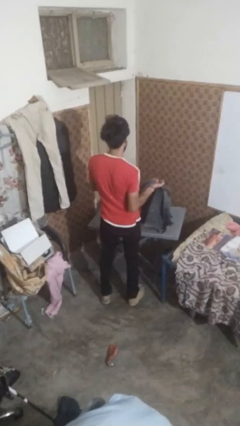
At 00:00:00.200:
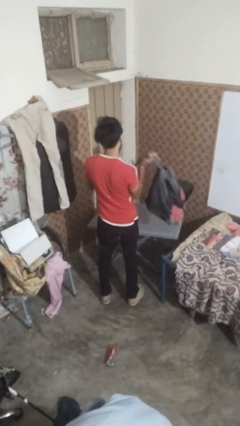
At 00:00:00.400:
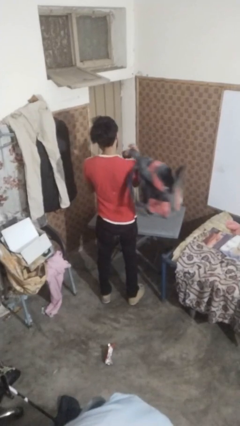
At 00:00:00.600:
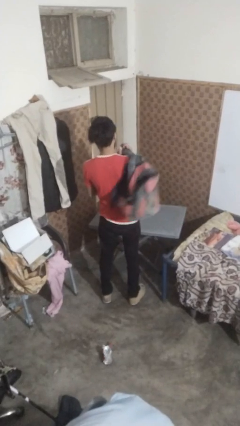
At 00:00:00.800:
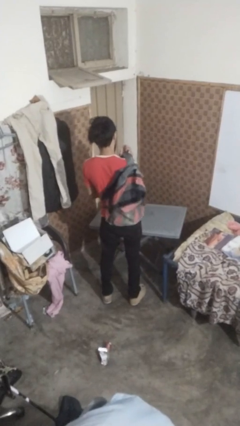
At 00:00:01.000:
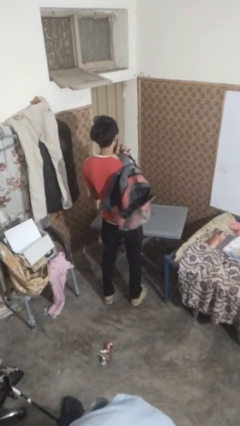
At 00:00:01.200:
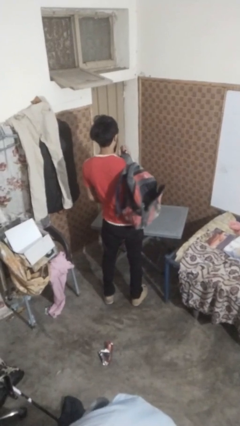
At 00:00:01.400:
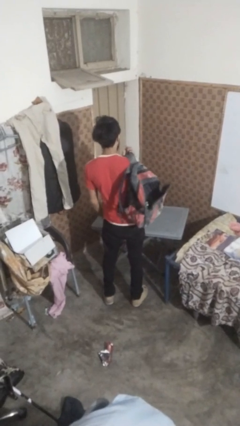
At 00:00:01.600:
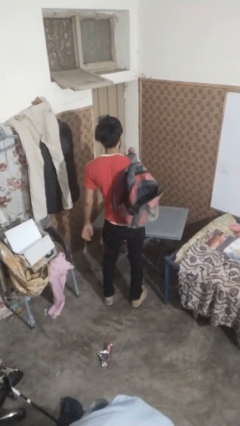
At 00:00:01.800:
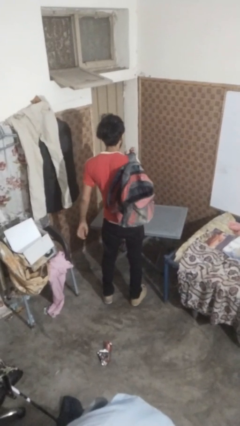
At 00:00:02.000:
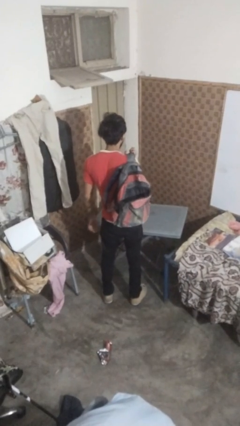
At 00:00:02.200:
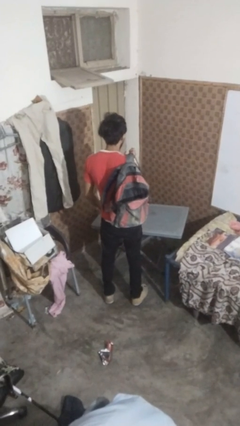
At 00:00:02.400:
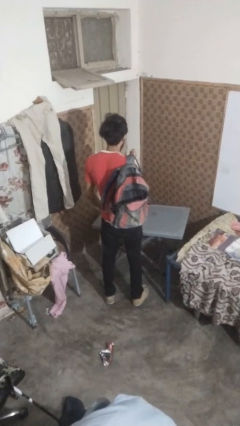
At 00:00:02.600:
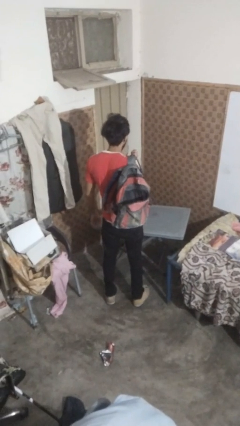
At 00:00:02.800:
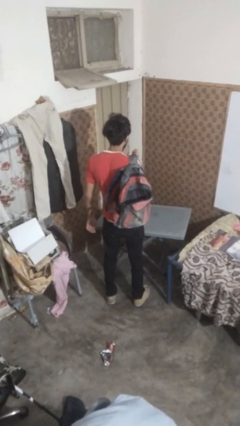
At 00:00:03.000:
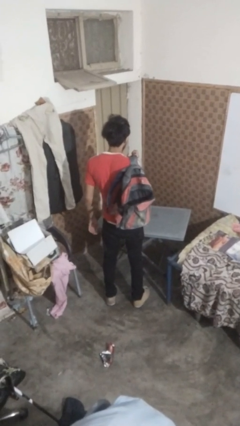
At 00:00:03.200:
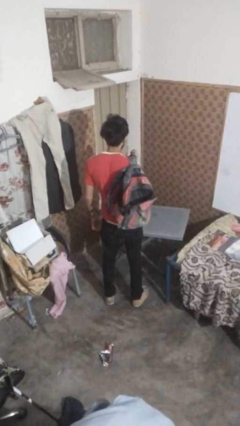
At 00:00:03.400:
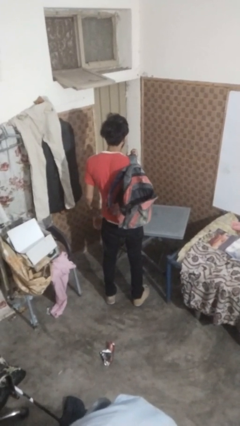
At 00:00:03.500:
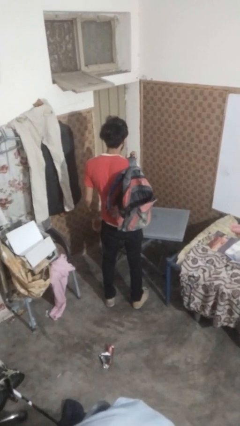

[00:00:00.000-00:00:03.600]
person puts on backpack

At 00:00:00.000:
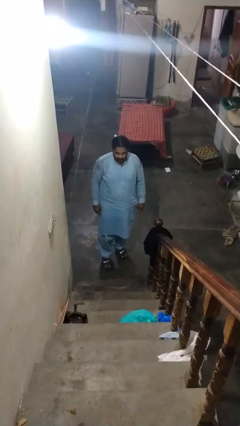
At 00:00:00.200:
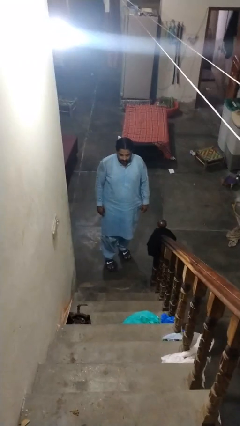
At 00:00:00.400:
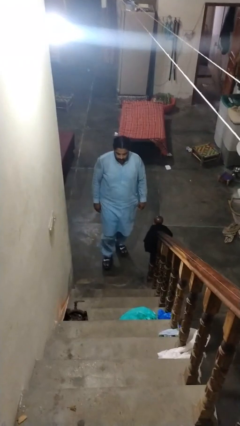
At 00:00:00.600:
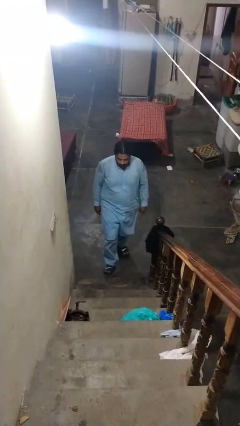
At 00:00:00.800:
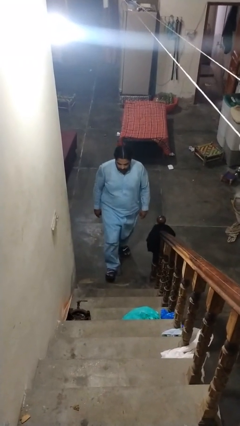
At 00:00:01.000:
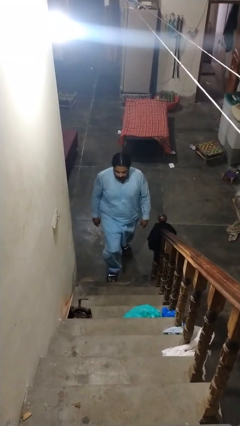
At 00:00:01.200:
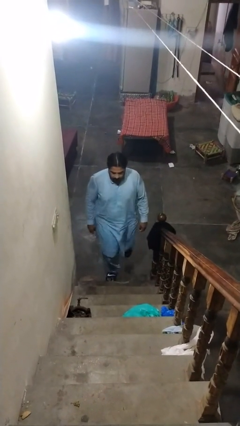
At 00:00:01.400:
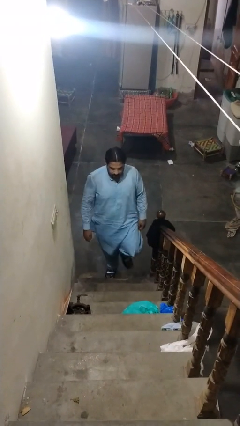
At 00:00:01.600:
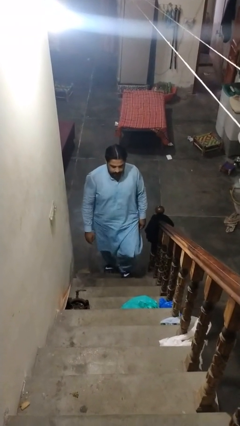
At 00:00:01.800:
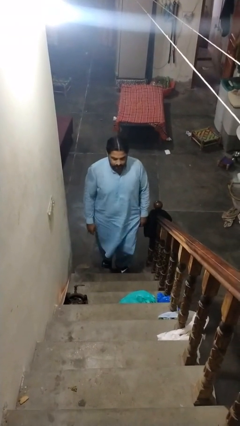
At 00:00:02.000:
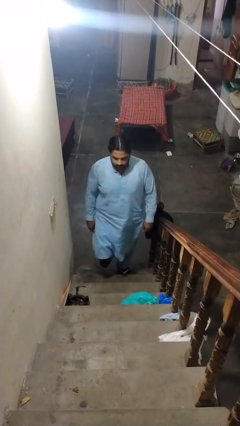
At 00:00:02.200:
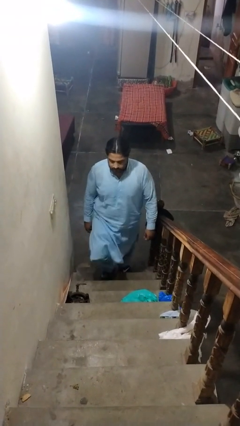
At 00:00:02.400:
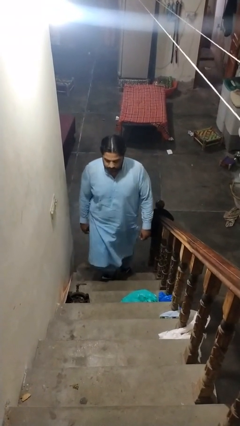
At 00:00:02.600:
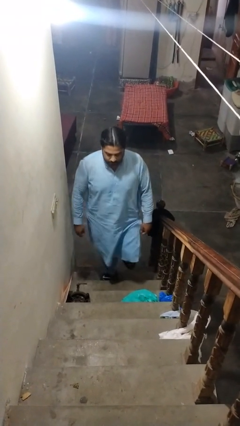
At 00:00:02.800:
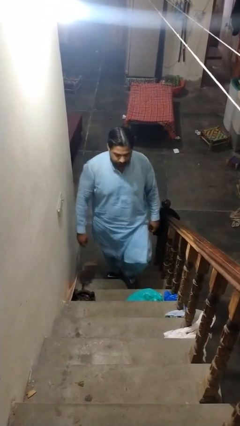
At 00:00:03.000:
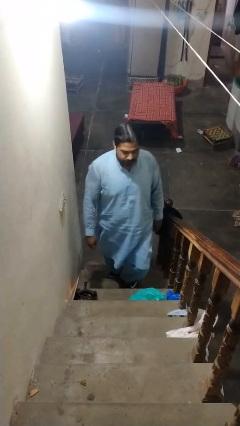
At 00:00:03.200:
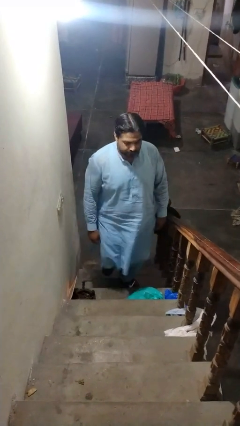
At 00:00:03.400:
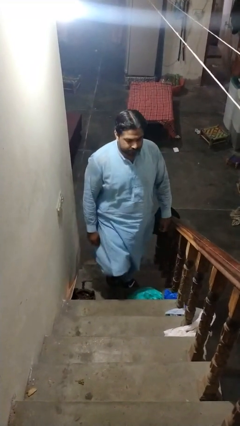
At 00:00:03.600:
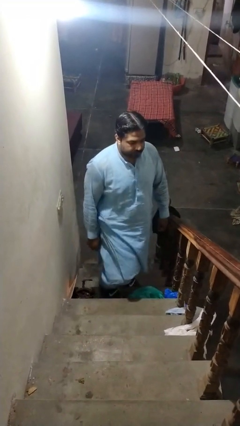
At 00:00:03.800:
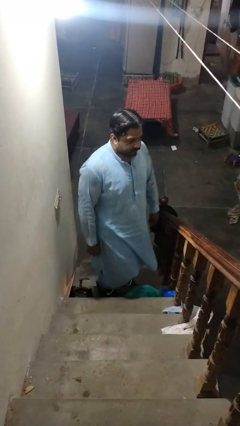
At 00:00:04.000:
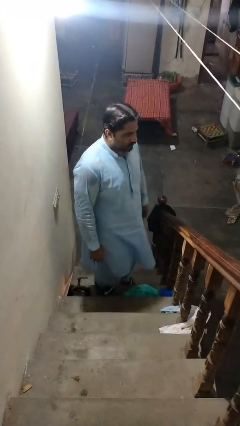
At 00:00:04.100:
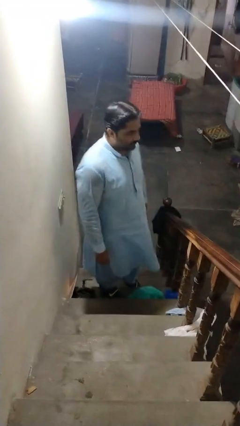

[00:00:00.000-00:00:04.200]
person climbs up stairs

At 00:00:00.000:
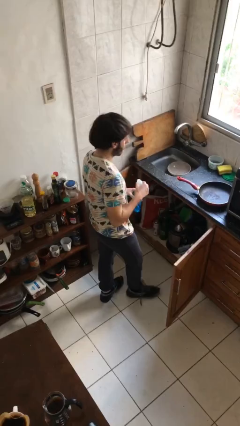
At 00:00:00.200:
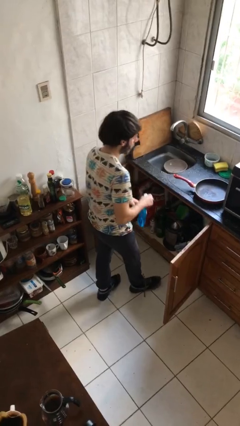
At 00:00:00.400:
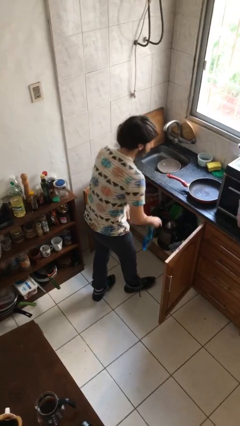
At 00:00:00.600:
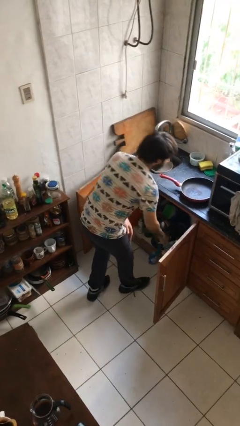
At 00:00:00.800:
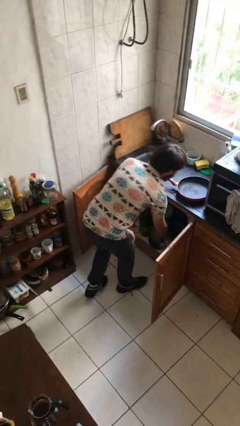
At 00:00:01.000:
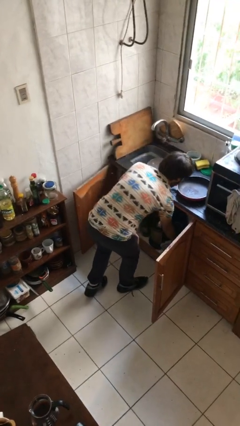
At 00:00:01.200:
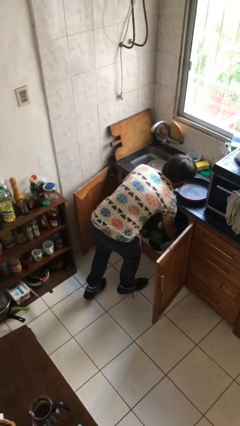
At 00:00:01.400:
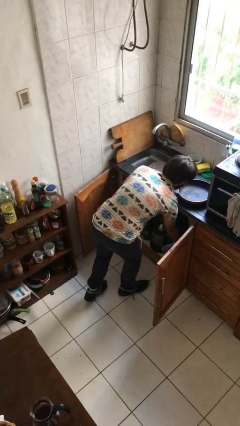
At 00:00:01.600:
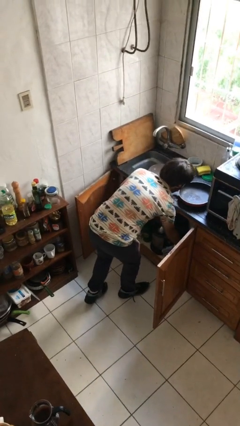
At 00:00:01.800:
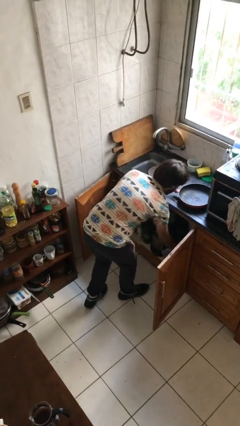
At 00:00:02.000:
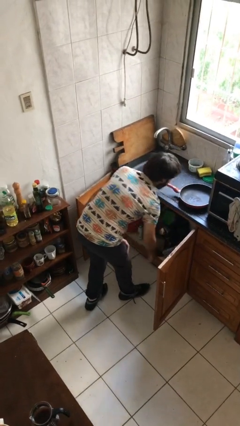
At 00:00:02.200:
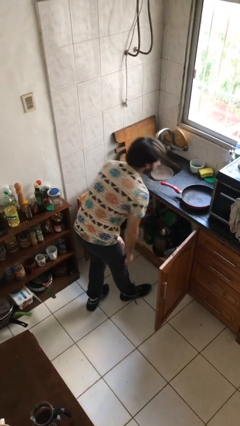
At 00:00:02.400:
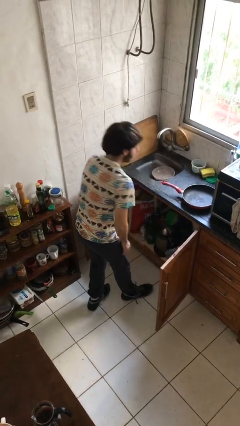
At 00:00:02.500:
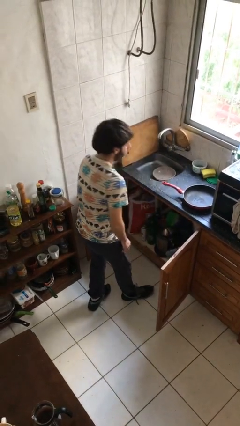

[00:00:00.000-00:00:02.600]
person puts down object into cabinet

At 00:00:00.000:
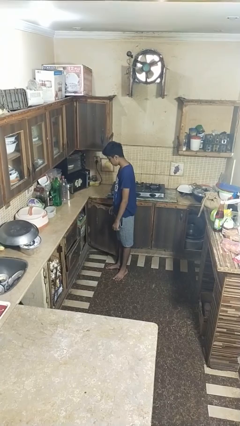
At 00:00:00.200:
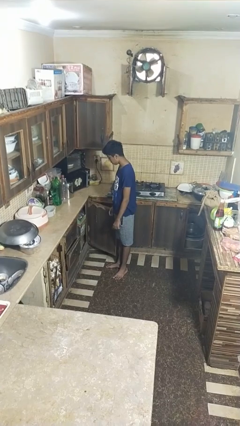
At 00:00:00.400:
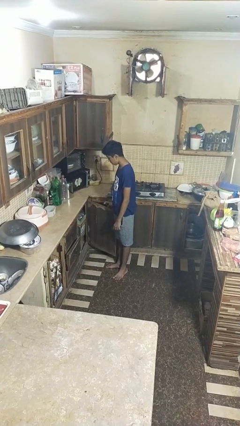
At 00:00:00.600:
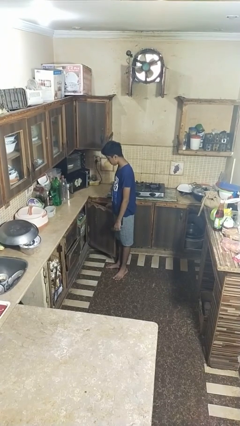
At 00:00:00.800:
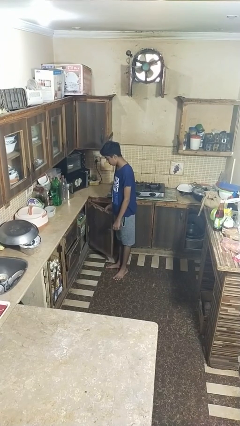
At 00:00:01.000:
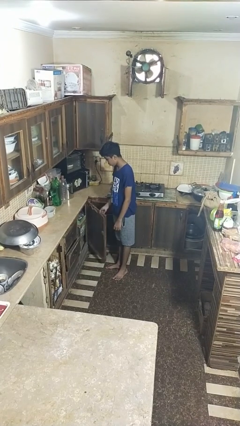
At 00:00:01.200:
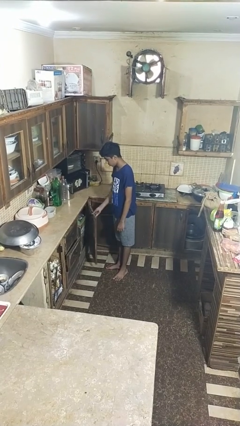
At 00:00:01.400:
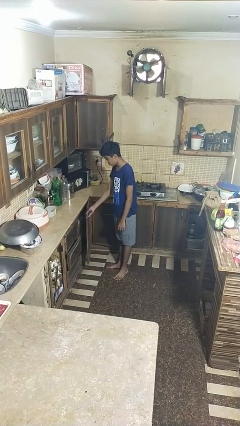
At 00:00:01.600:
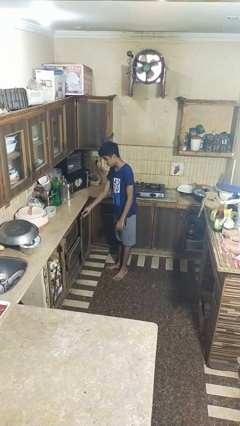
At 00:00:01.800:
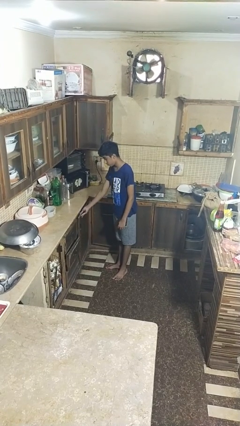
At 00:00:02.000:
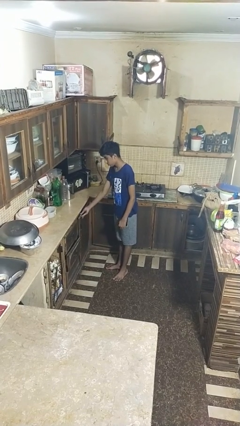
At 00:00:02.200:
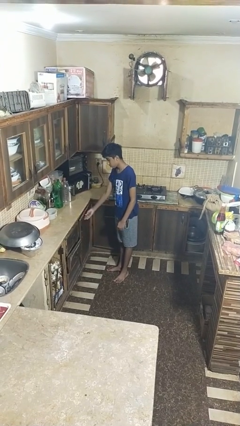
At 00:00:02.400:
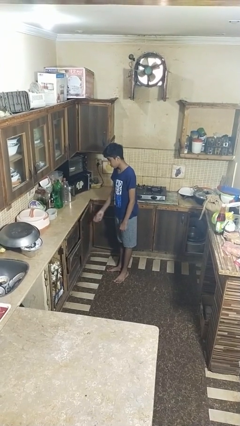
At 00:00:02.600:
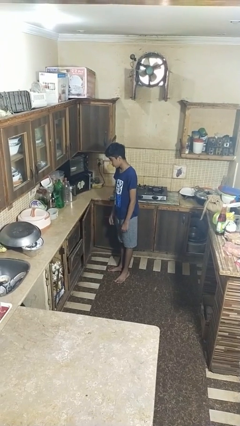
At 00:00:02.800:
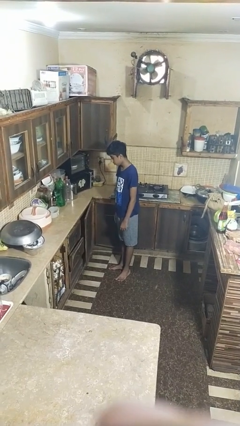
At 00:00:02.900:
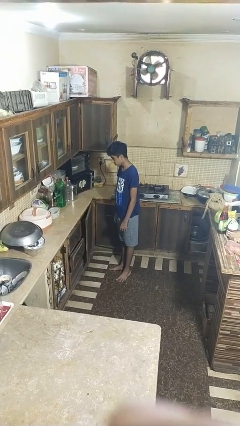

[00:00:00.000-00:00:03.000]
person closes closet door

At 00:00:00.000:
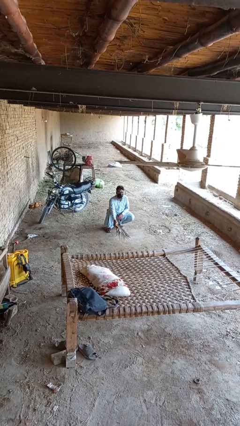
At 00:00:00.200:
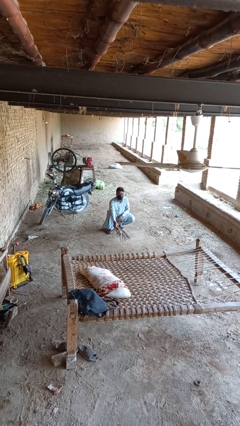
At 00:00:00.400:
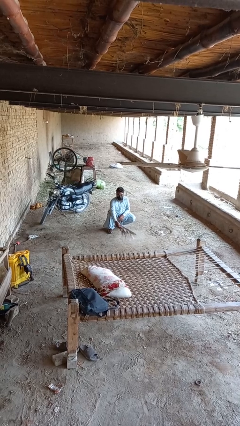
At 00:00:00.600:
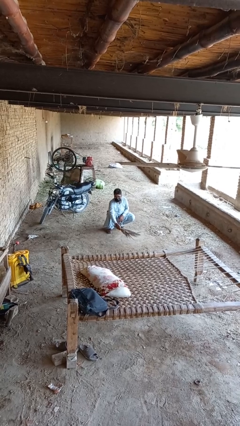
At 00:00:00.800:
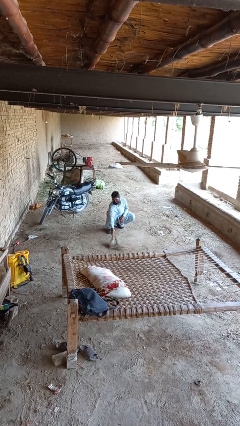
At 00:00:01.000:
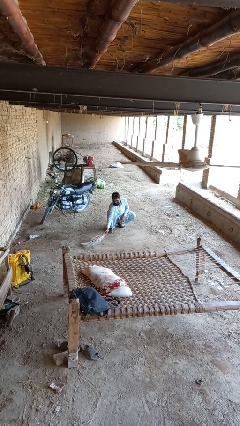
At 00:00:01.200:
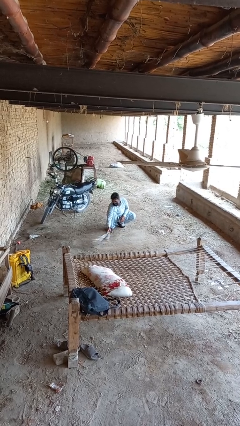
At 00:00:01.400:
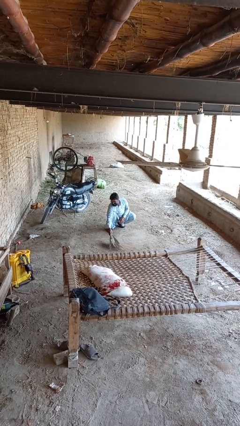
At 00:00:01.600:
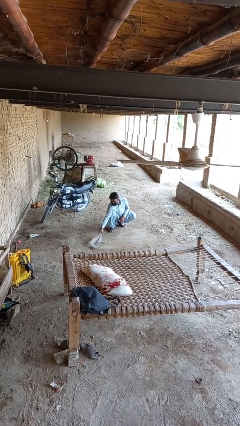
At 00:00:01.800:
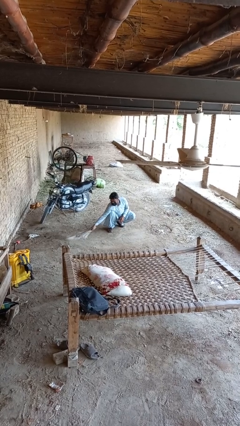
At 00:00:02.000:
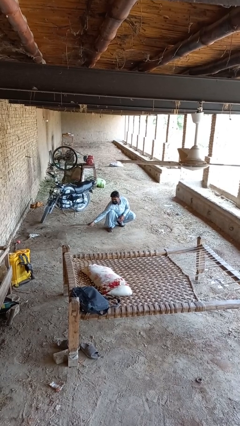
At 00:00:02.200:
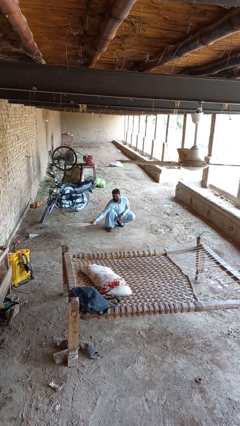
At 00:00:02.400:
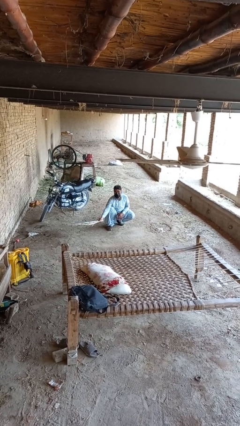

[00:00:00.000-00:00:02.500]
person sweeps floor

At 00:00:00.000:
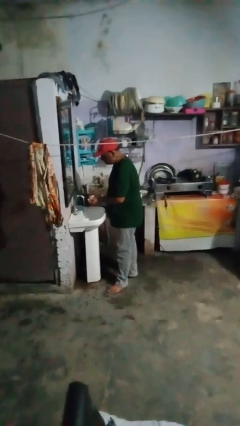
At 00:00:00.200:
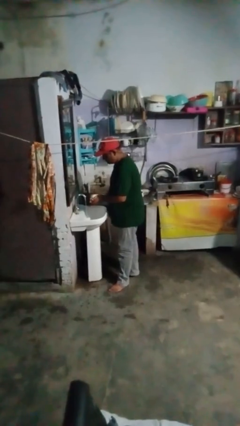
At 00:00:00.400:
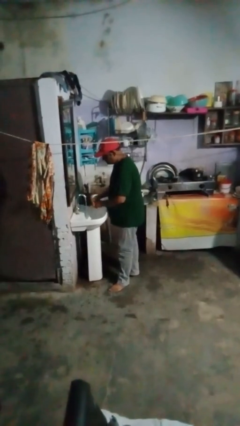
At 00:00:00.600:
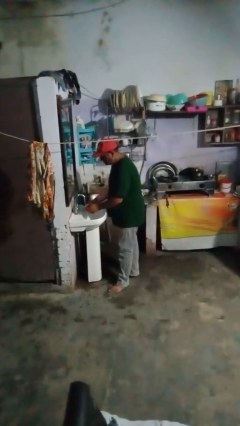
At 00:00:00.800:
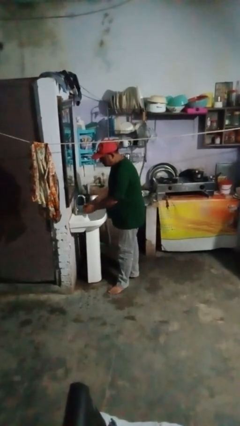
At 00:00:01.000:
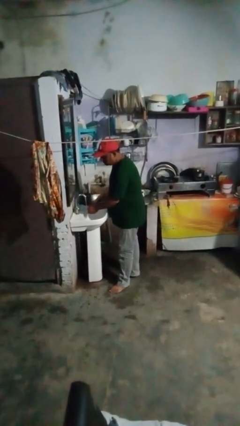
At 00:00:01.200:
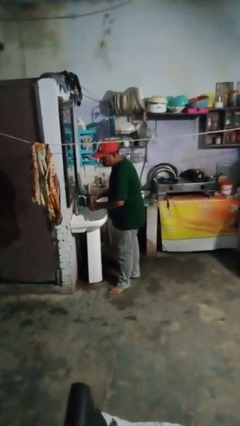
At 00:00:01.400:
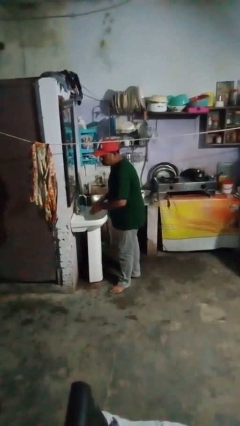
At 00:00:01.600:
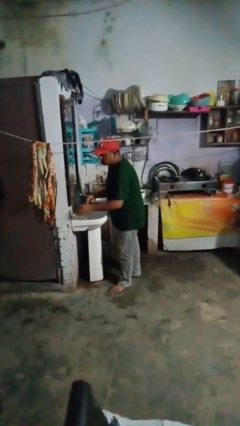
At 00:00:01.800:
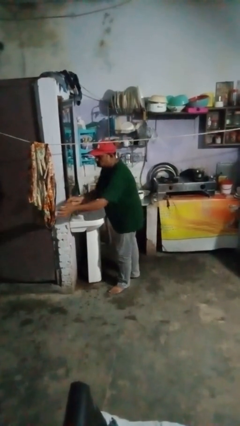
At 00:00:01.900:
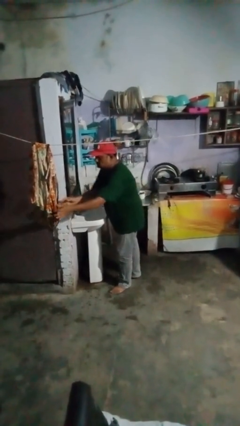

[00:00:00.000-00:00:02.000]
person washes hands
